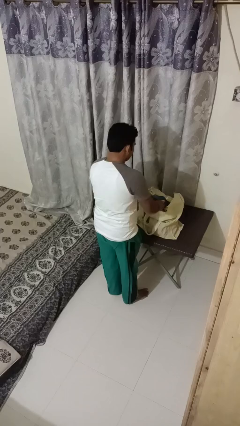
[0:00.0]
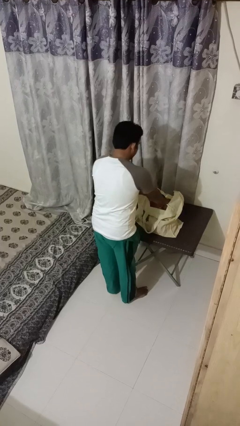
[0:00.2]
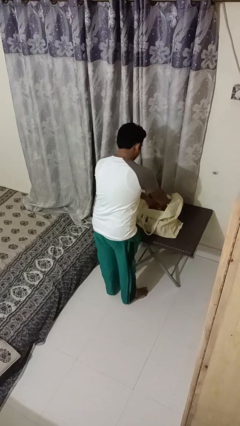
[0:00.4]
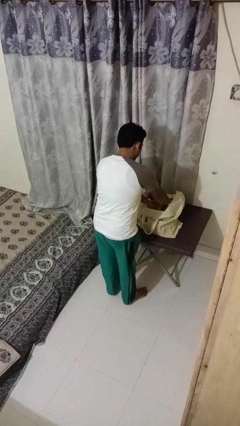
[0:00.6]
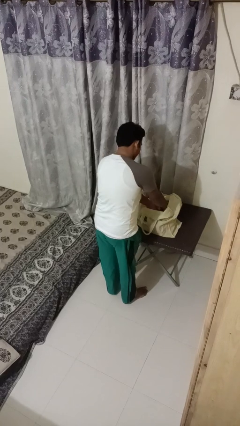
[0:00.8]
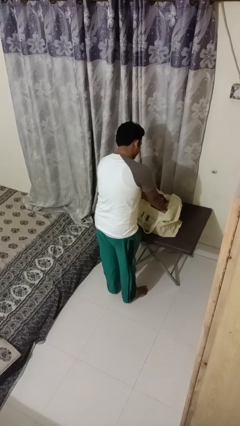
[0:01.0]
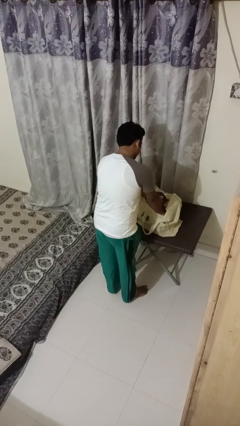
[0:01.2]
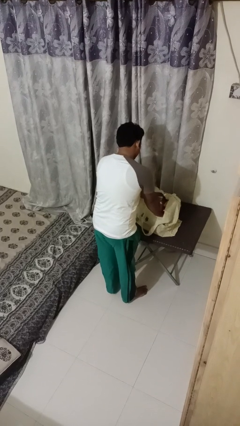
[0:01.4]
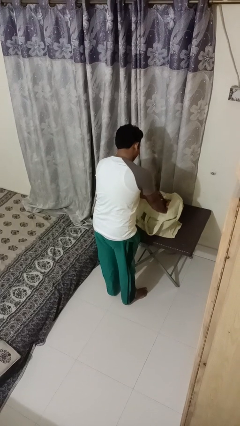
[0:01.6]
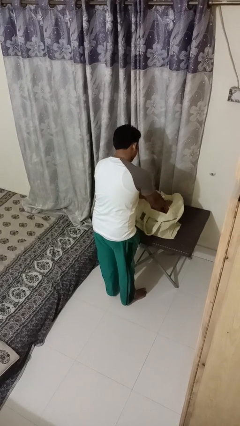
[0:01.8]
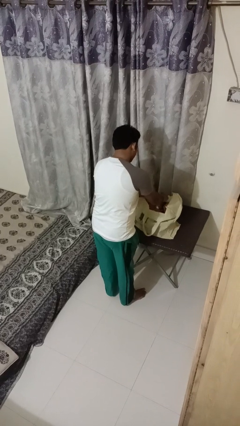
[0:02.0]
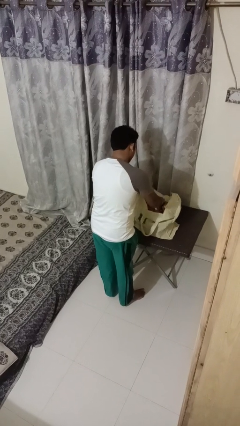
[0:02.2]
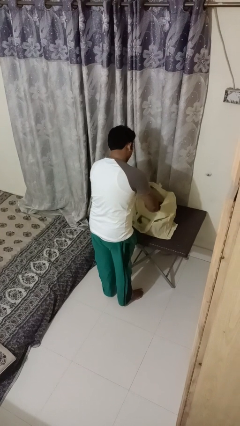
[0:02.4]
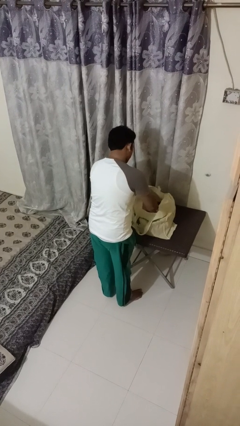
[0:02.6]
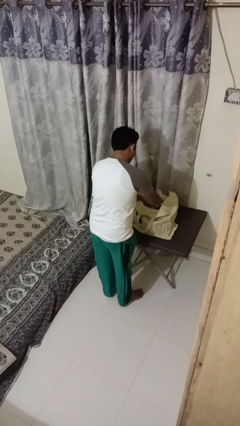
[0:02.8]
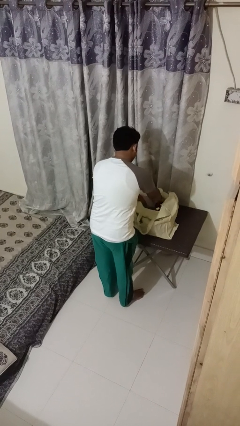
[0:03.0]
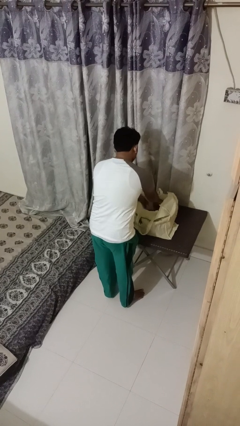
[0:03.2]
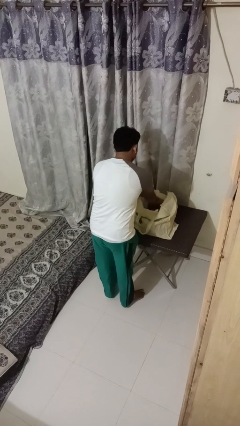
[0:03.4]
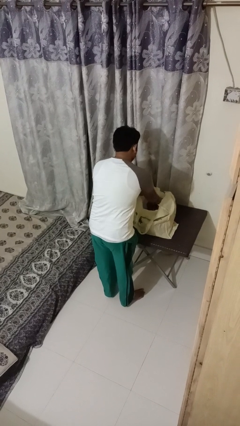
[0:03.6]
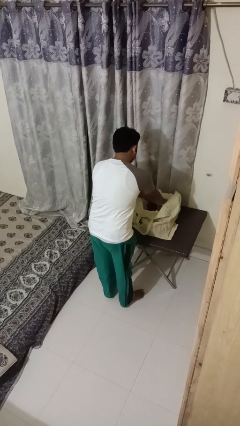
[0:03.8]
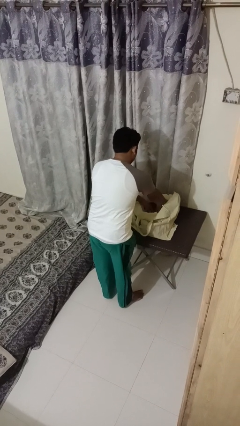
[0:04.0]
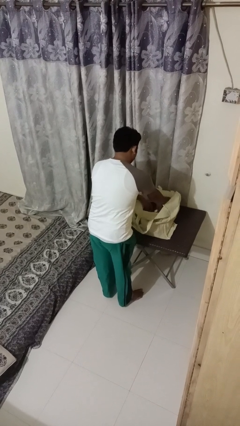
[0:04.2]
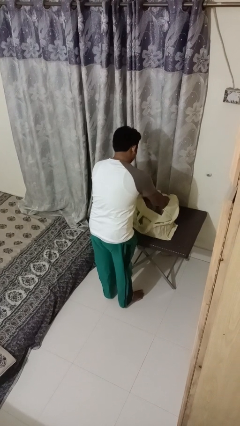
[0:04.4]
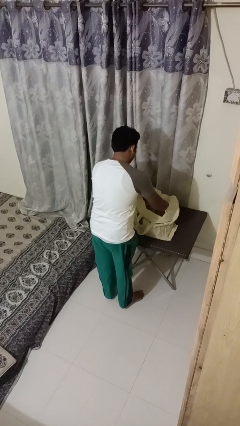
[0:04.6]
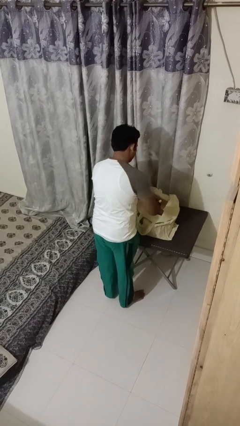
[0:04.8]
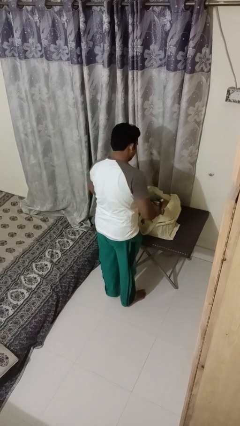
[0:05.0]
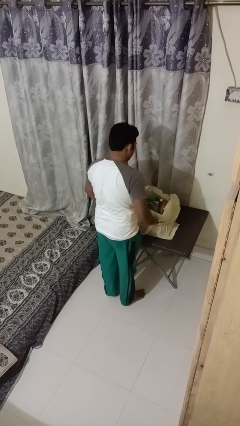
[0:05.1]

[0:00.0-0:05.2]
person searches in bag

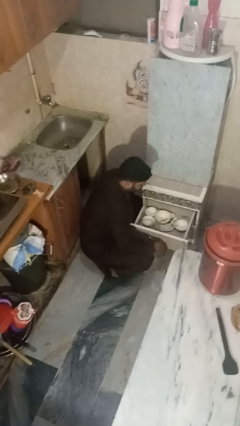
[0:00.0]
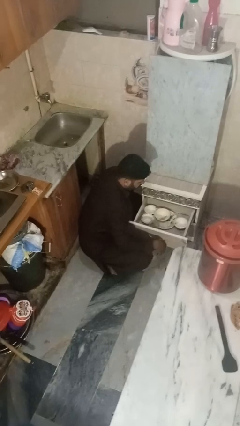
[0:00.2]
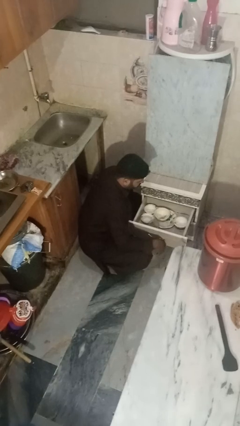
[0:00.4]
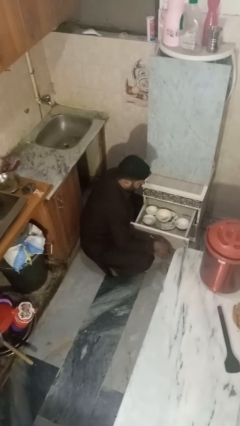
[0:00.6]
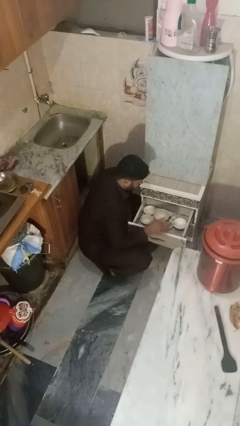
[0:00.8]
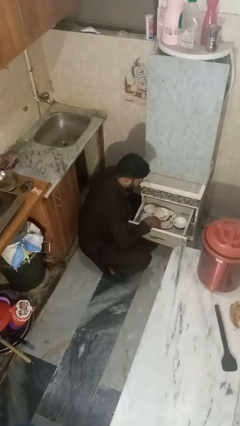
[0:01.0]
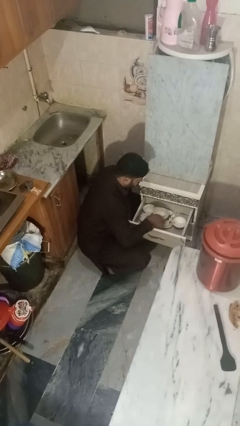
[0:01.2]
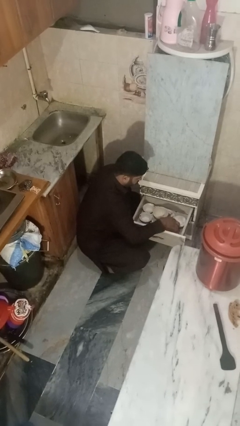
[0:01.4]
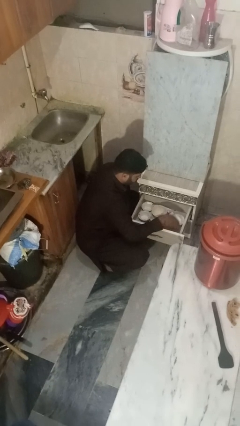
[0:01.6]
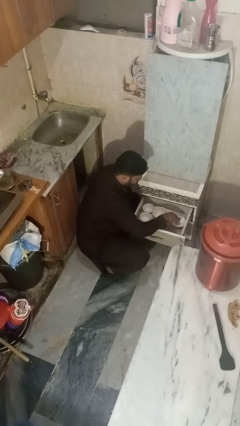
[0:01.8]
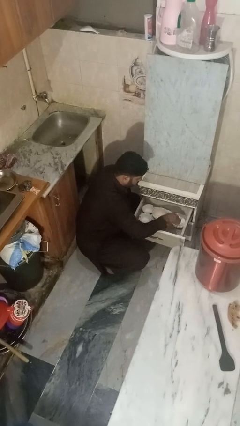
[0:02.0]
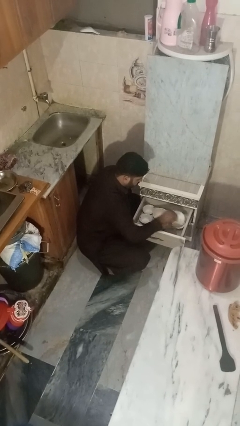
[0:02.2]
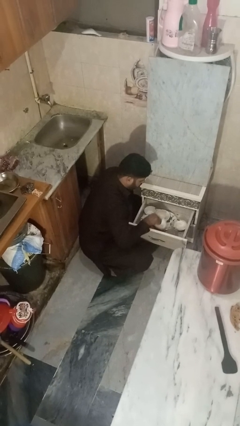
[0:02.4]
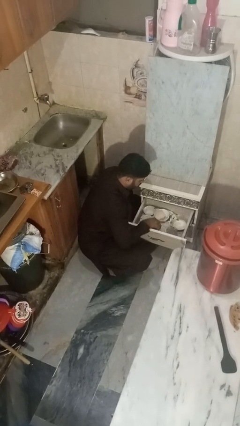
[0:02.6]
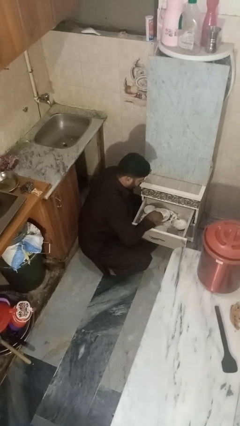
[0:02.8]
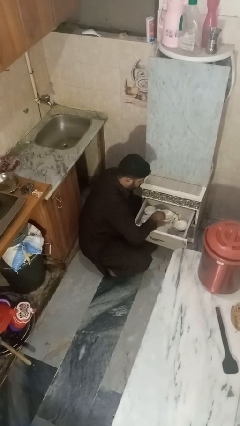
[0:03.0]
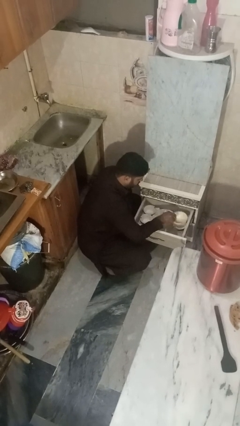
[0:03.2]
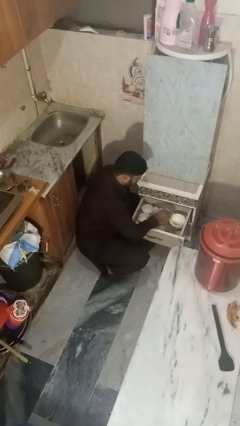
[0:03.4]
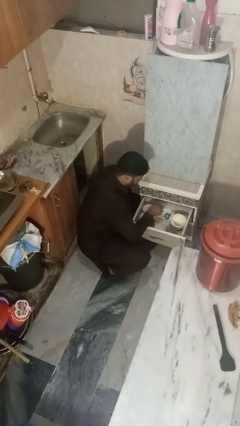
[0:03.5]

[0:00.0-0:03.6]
person searches in kitchen drawer

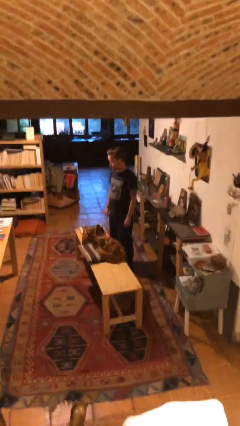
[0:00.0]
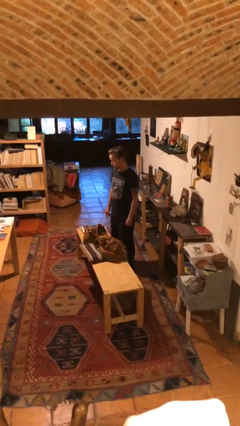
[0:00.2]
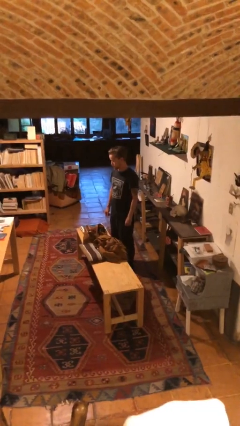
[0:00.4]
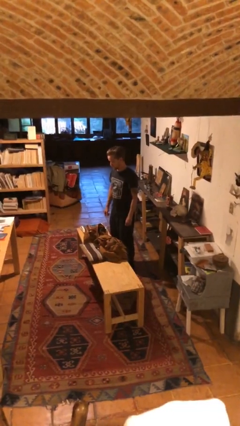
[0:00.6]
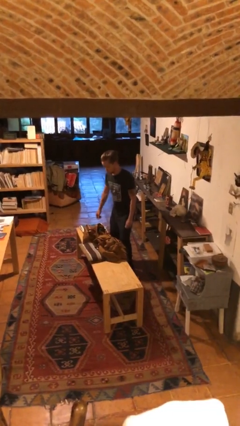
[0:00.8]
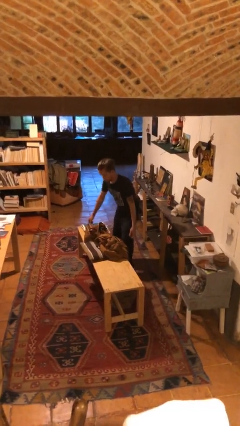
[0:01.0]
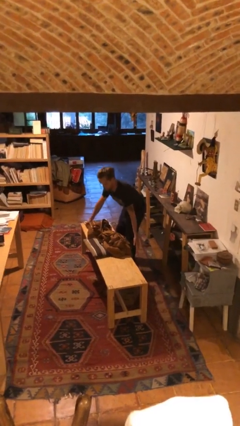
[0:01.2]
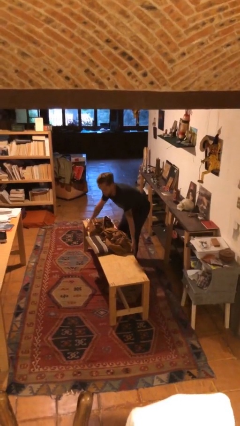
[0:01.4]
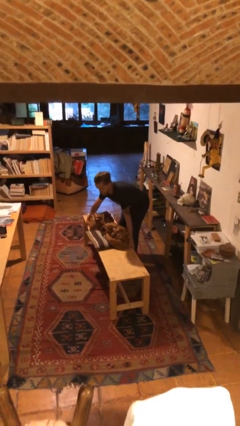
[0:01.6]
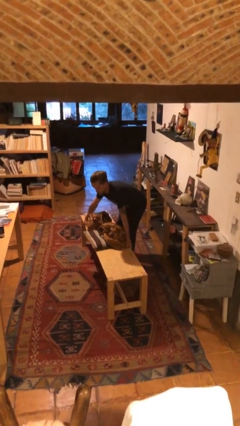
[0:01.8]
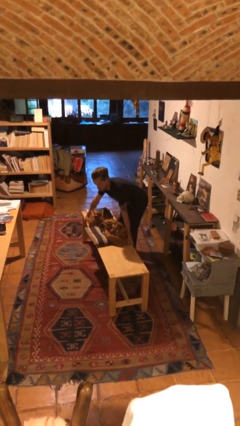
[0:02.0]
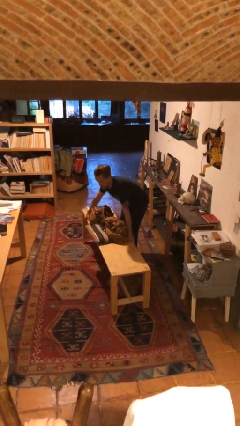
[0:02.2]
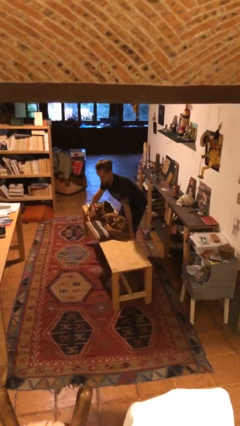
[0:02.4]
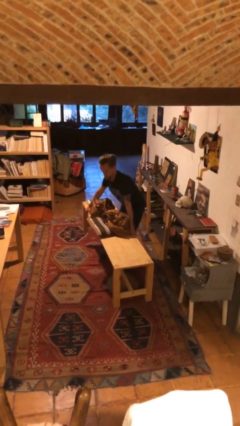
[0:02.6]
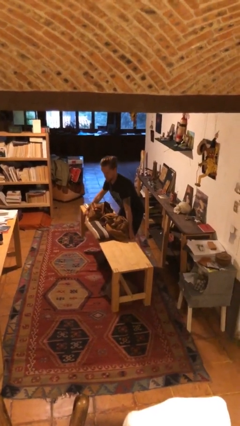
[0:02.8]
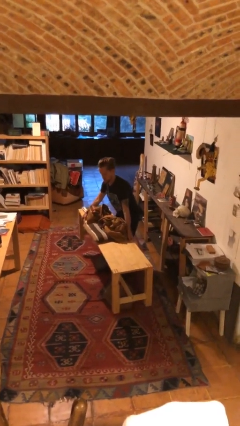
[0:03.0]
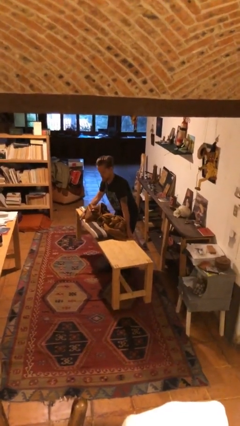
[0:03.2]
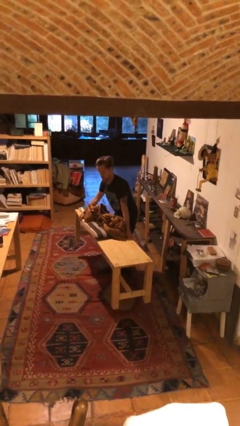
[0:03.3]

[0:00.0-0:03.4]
person picks up object from floor

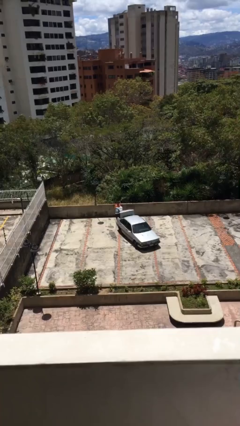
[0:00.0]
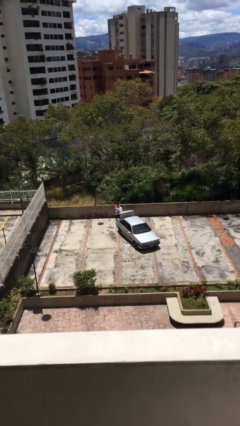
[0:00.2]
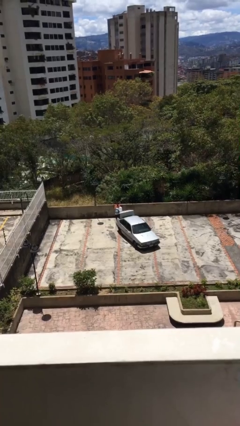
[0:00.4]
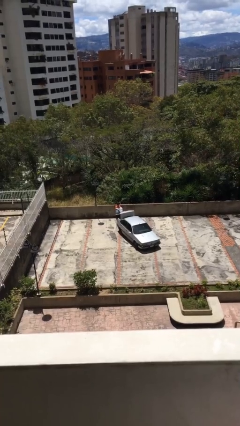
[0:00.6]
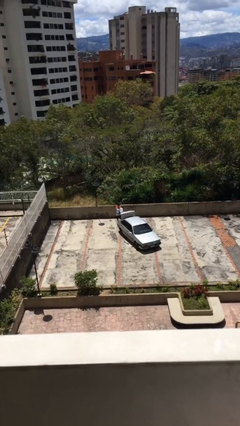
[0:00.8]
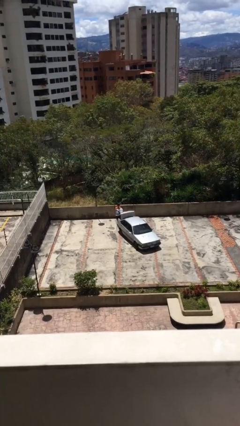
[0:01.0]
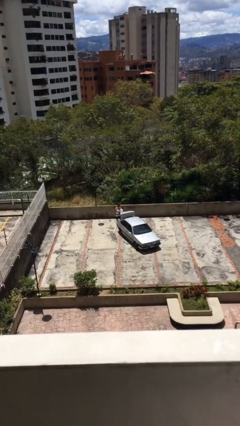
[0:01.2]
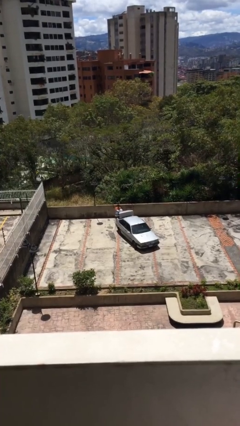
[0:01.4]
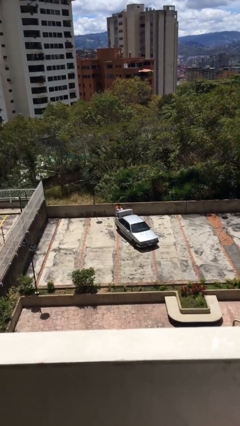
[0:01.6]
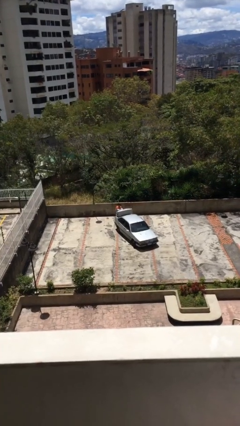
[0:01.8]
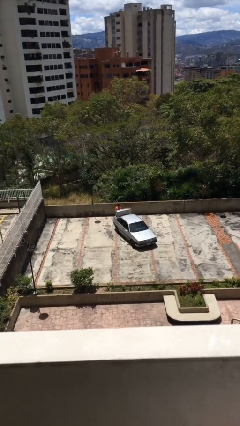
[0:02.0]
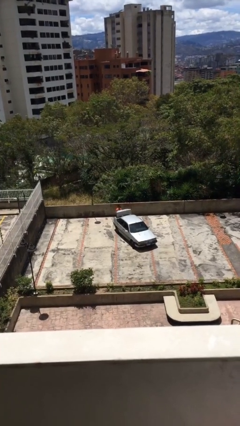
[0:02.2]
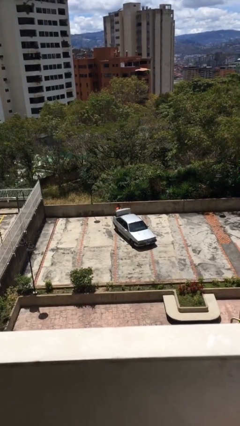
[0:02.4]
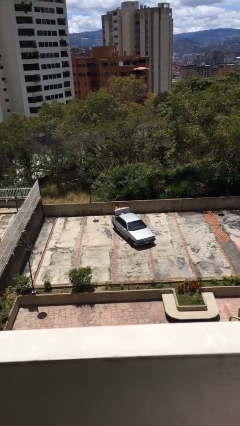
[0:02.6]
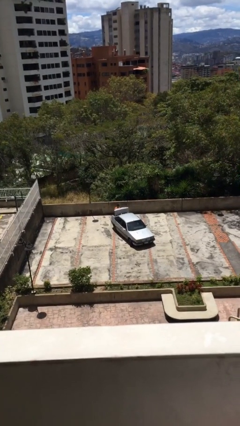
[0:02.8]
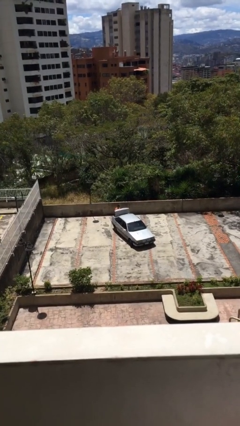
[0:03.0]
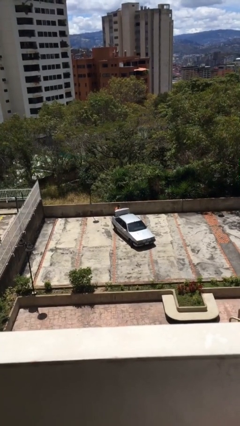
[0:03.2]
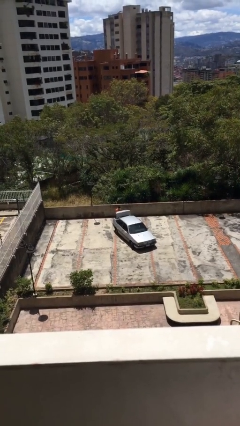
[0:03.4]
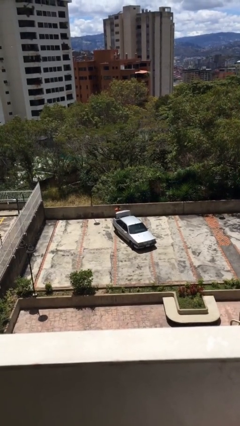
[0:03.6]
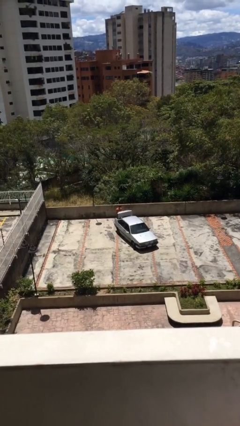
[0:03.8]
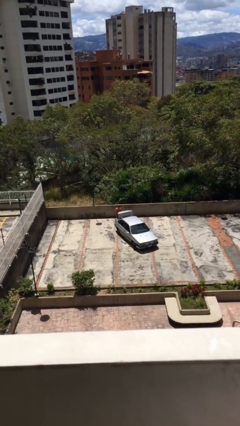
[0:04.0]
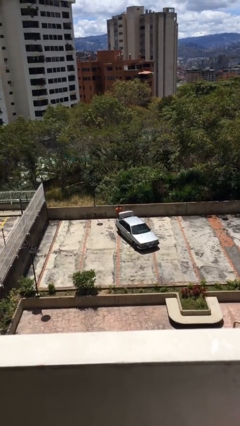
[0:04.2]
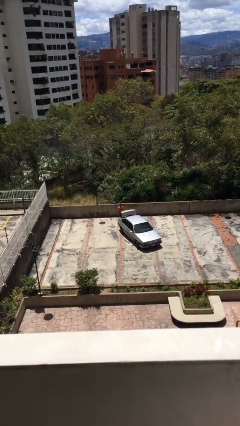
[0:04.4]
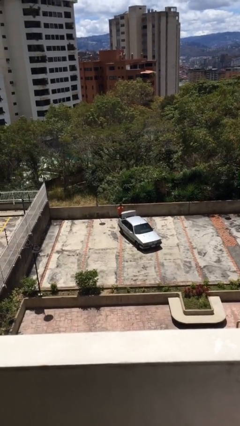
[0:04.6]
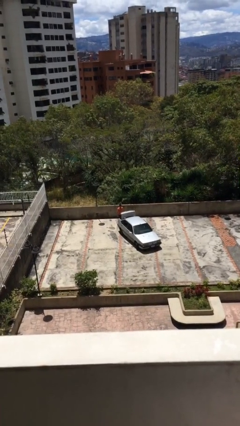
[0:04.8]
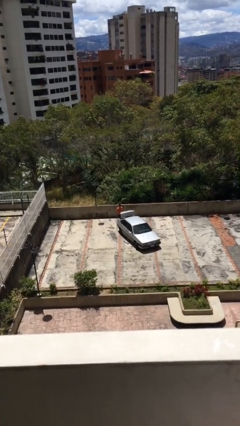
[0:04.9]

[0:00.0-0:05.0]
person loads car
